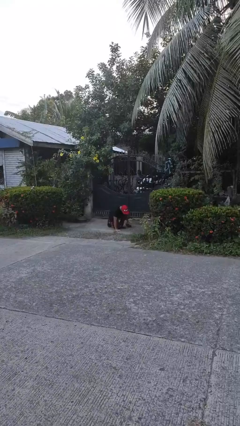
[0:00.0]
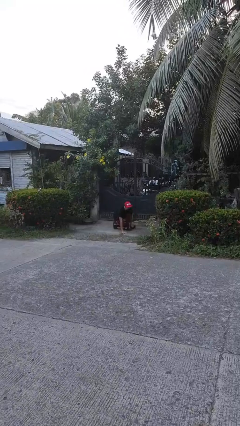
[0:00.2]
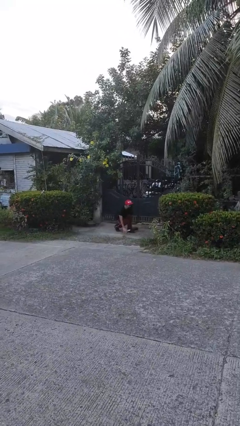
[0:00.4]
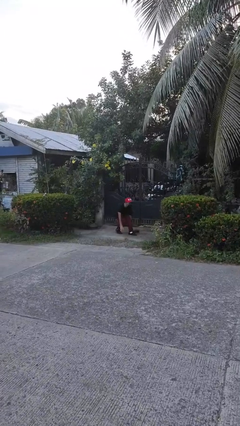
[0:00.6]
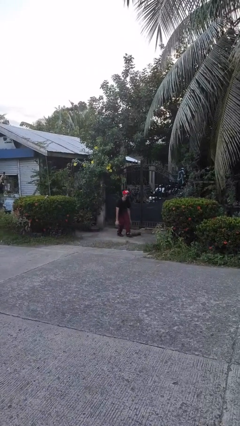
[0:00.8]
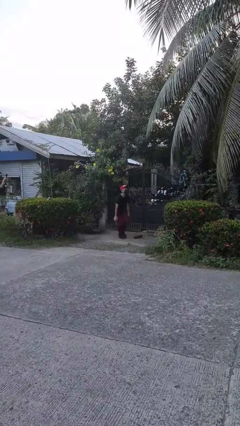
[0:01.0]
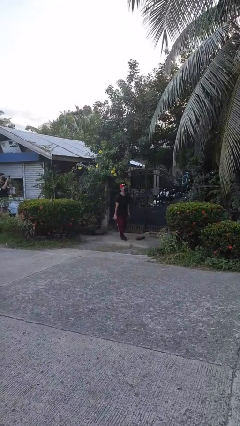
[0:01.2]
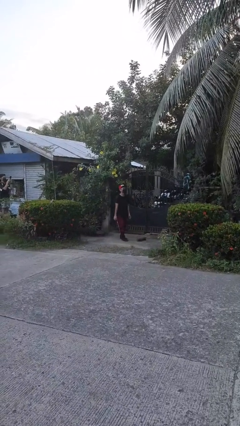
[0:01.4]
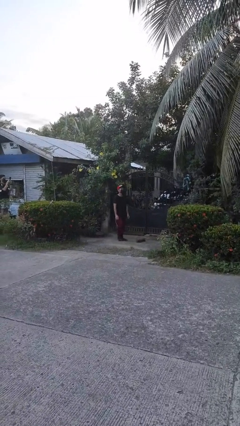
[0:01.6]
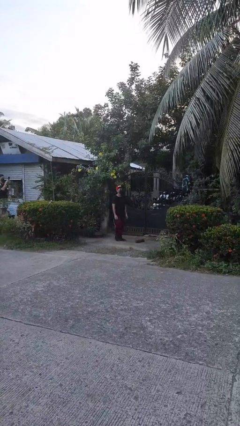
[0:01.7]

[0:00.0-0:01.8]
person stands up from floor

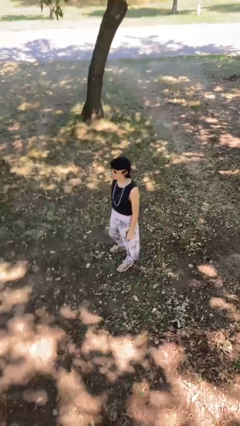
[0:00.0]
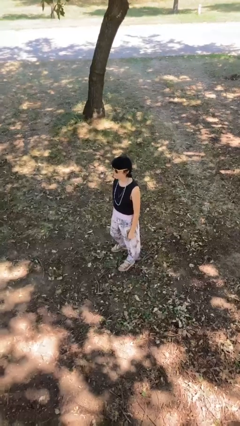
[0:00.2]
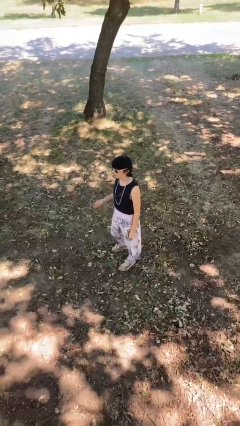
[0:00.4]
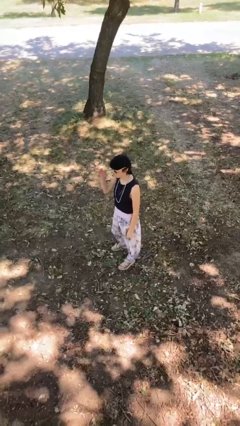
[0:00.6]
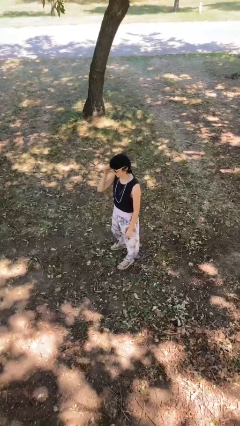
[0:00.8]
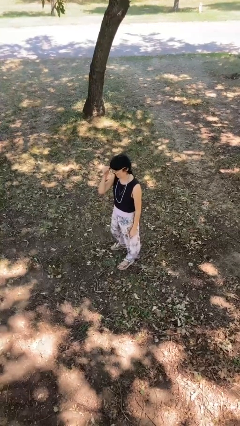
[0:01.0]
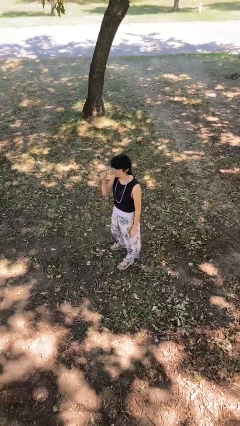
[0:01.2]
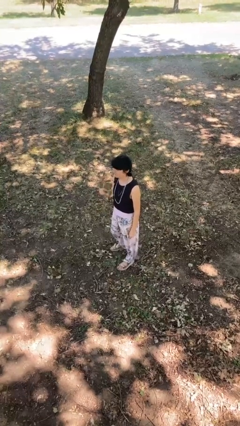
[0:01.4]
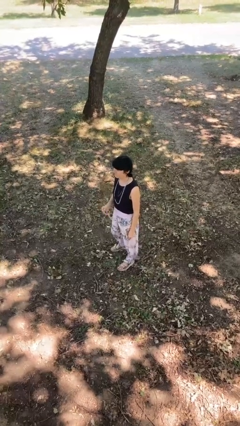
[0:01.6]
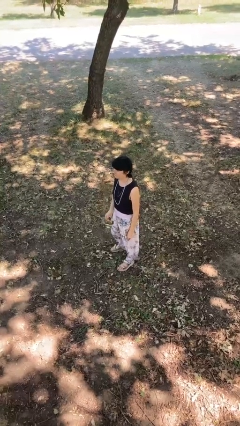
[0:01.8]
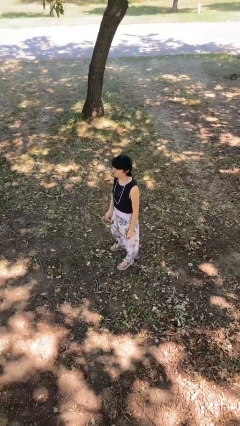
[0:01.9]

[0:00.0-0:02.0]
person takes off sunglasses

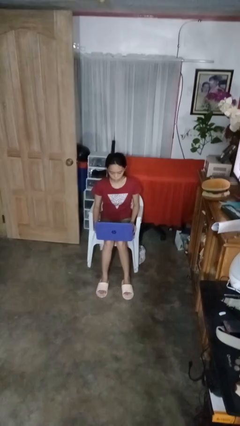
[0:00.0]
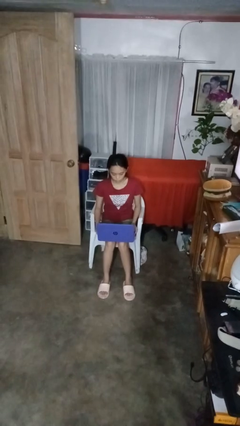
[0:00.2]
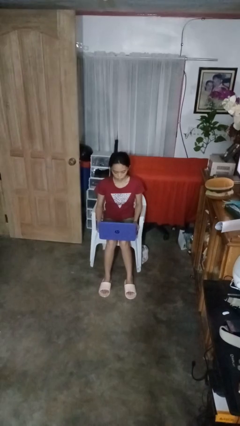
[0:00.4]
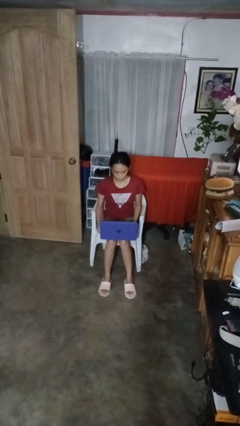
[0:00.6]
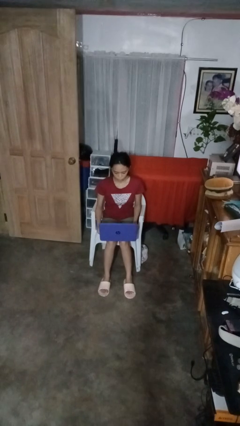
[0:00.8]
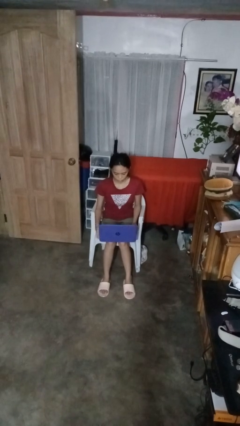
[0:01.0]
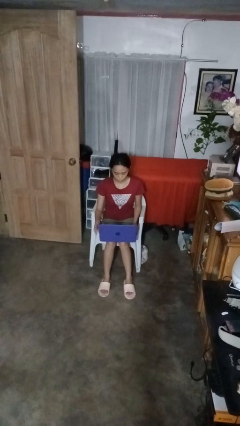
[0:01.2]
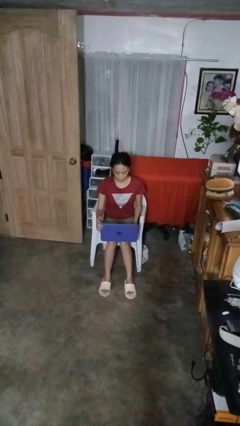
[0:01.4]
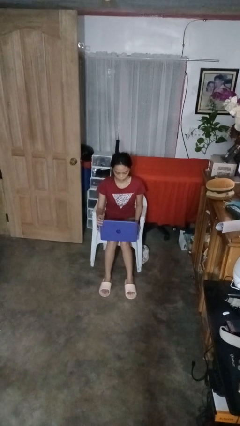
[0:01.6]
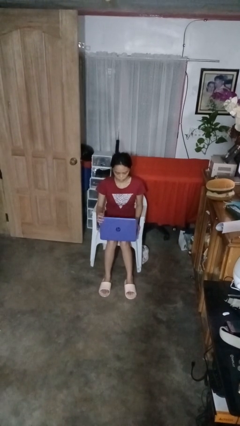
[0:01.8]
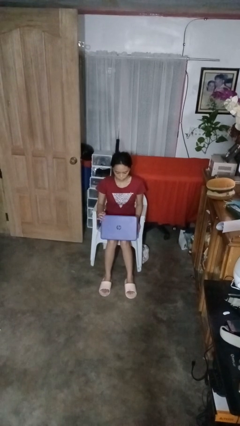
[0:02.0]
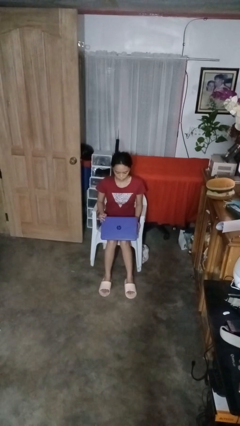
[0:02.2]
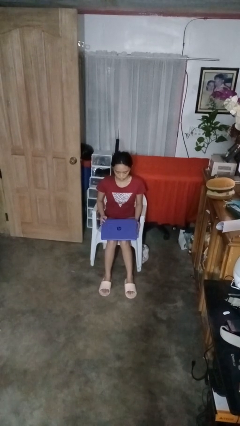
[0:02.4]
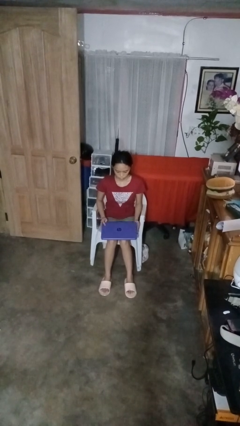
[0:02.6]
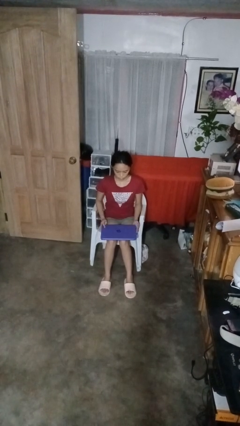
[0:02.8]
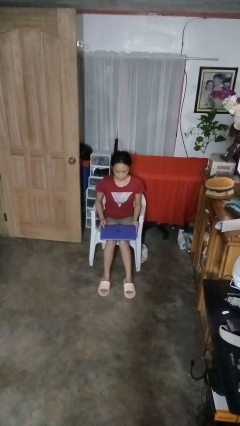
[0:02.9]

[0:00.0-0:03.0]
person closes laptop

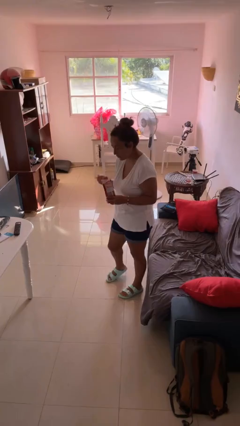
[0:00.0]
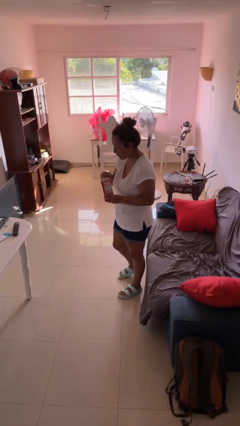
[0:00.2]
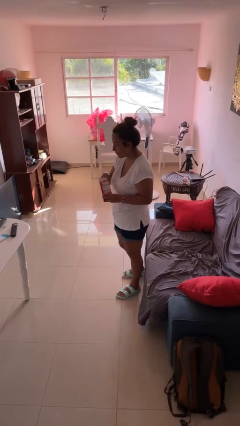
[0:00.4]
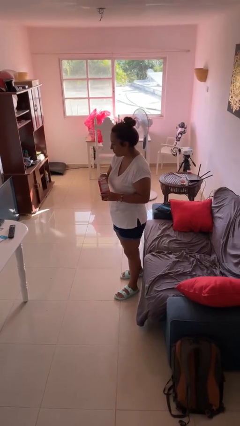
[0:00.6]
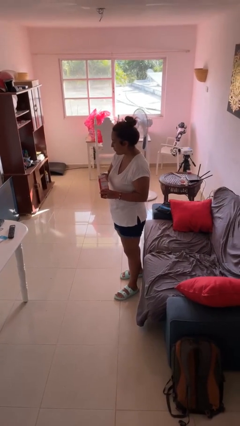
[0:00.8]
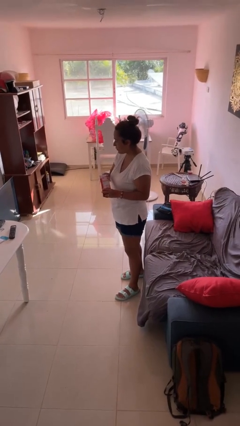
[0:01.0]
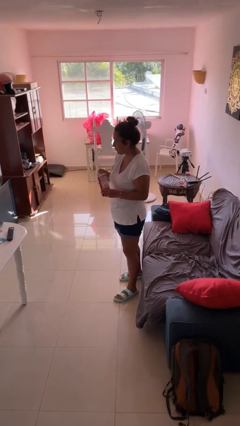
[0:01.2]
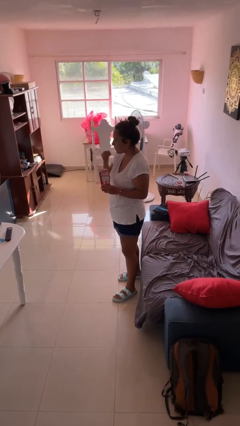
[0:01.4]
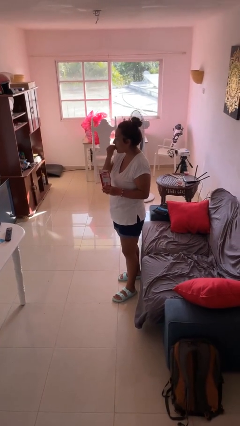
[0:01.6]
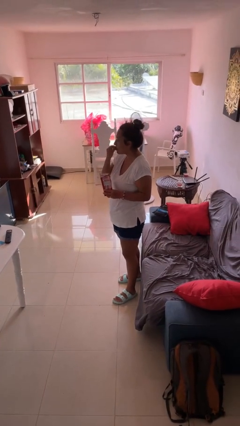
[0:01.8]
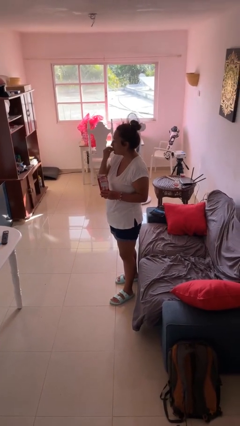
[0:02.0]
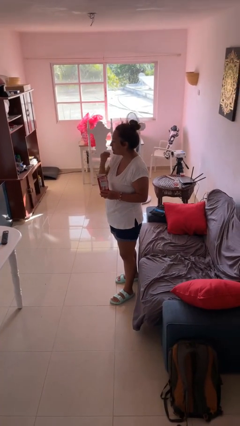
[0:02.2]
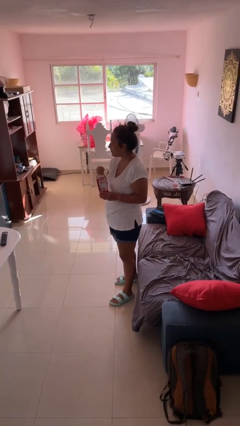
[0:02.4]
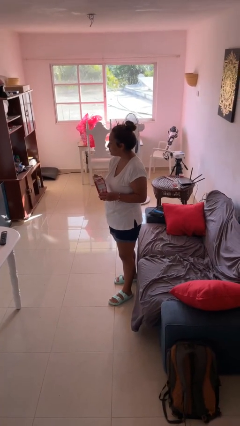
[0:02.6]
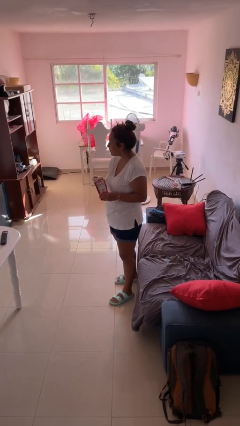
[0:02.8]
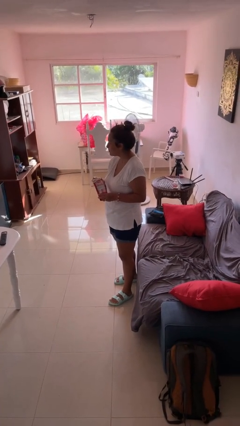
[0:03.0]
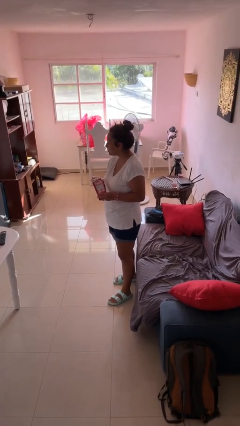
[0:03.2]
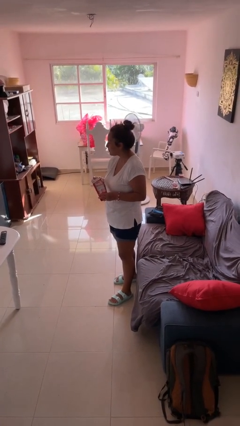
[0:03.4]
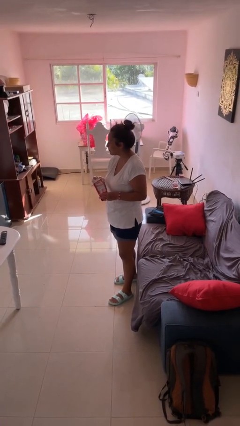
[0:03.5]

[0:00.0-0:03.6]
person eats snack from bag

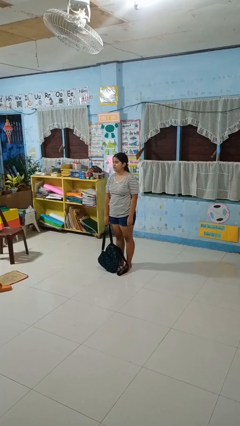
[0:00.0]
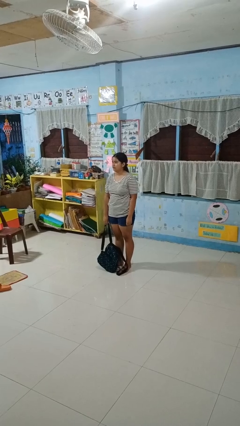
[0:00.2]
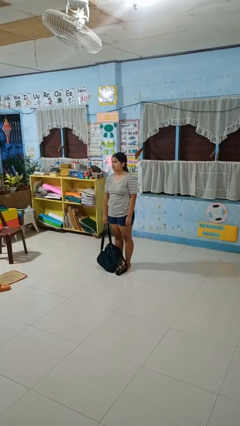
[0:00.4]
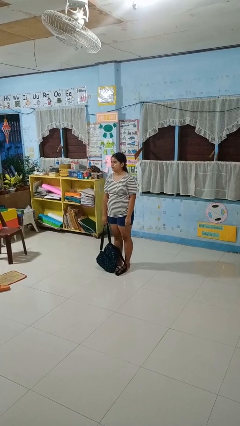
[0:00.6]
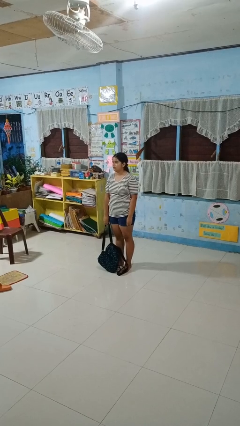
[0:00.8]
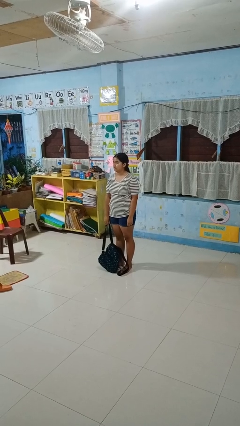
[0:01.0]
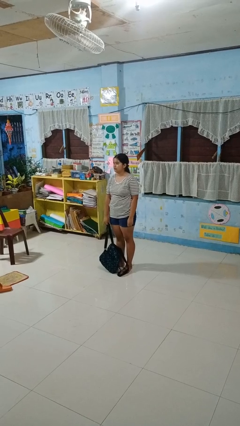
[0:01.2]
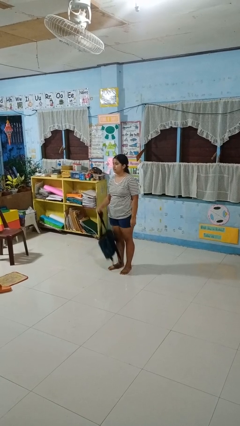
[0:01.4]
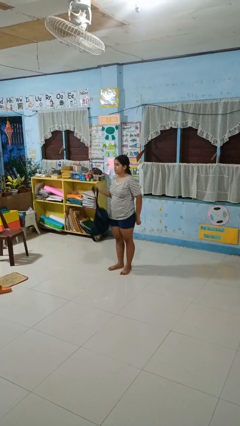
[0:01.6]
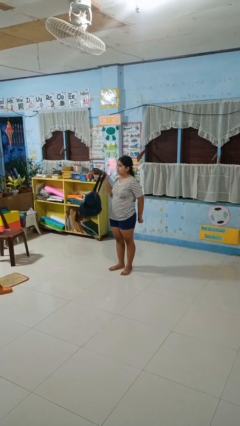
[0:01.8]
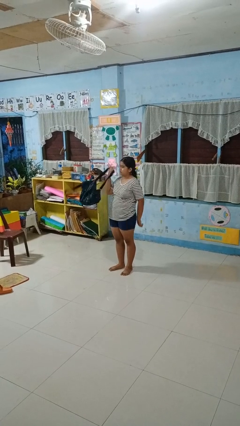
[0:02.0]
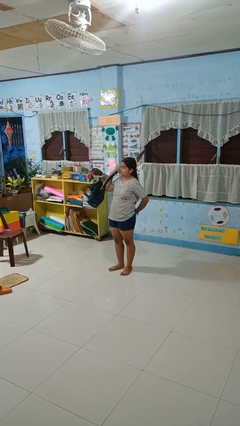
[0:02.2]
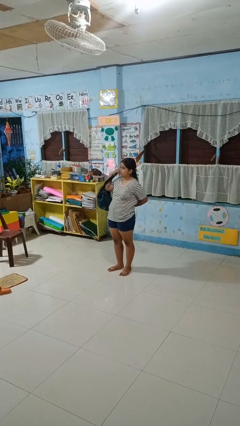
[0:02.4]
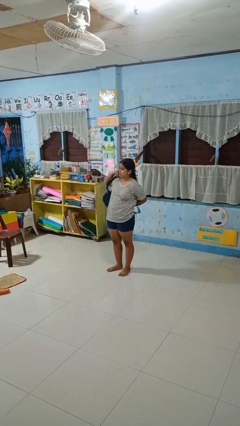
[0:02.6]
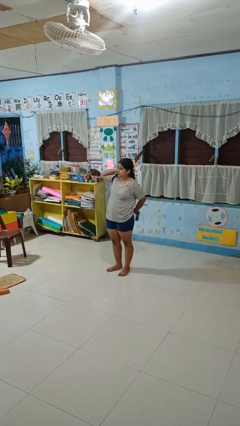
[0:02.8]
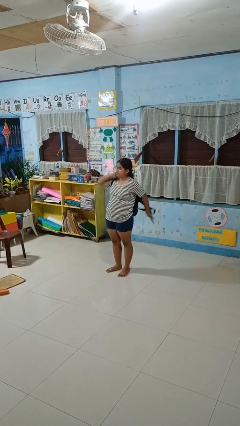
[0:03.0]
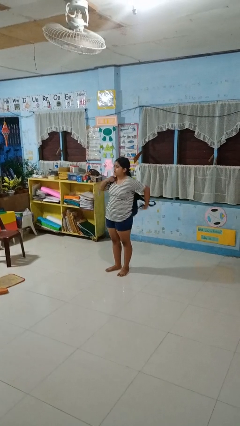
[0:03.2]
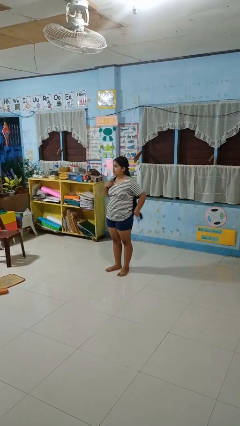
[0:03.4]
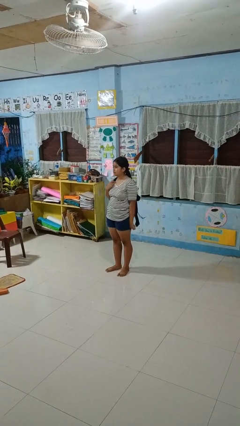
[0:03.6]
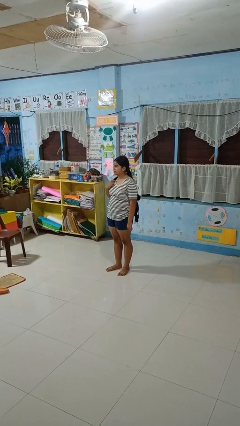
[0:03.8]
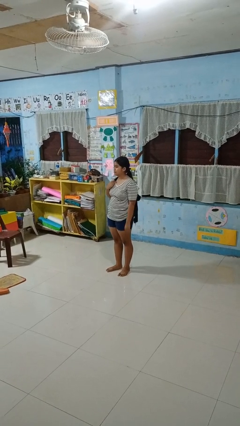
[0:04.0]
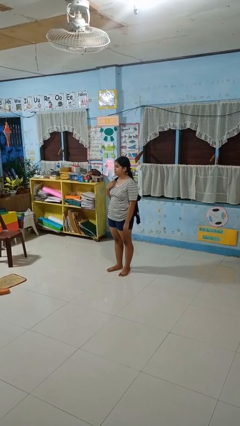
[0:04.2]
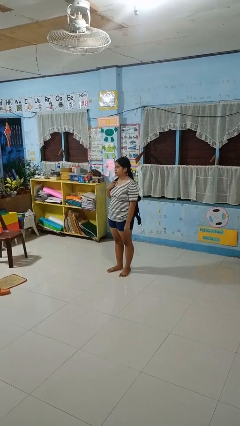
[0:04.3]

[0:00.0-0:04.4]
person puts on backpack

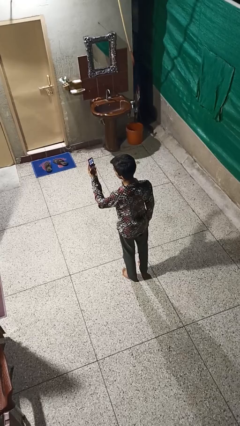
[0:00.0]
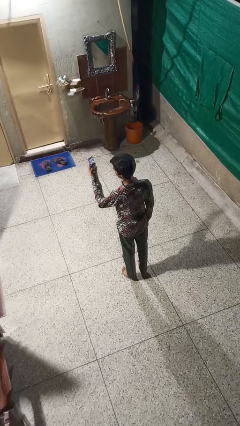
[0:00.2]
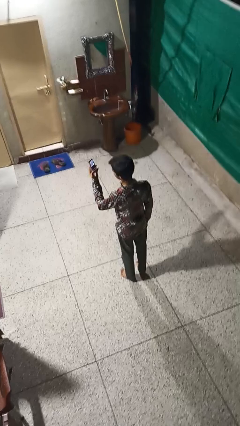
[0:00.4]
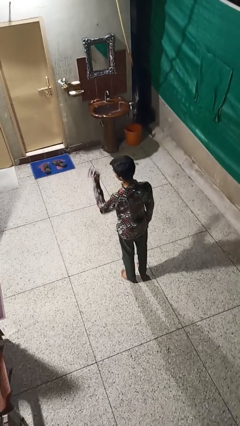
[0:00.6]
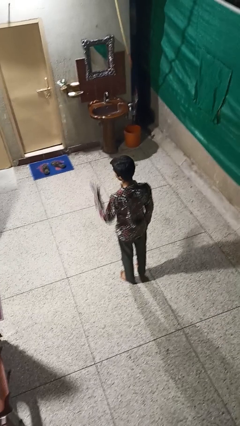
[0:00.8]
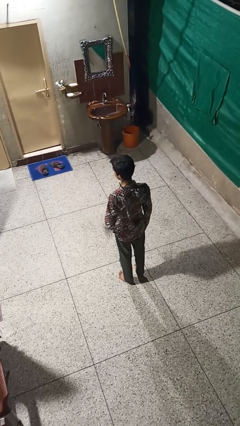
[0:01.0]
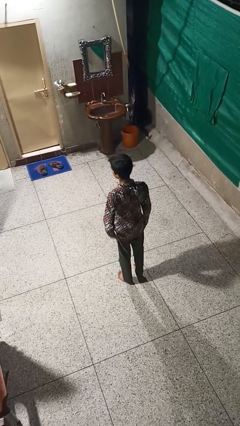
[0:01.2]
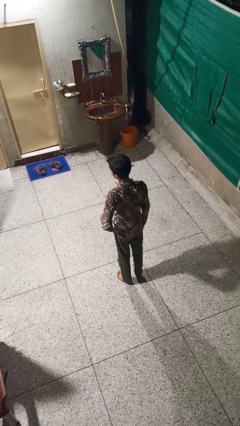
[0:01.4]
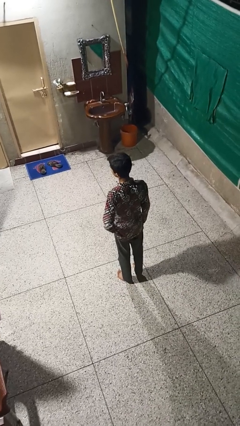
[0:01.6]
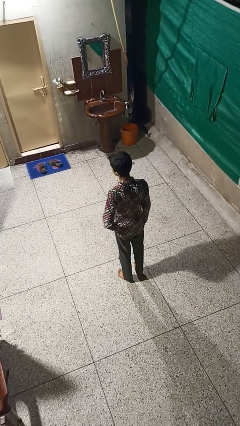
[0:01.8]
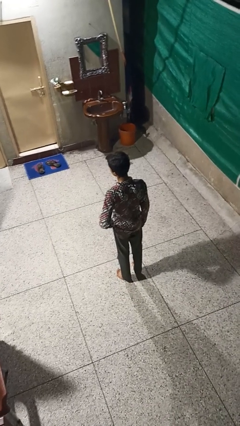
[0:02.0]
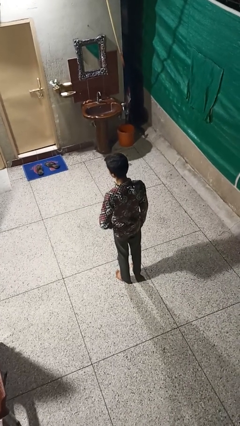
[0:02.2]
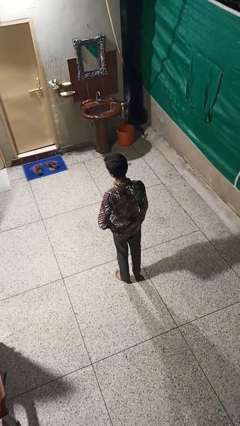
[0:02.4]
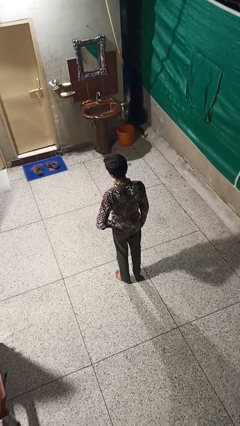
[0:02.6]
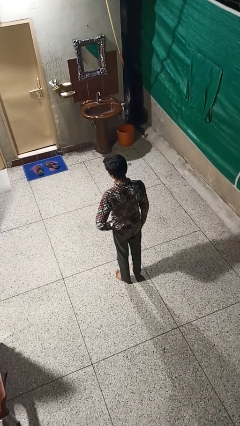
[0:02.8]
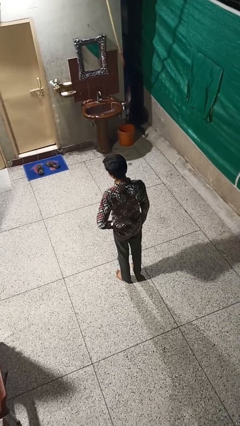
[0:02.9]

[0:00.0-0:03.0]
person puts phone into pocket
